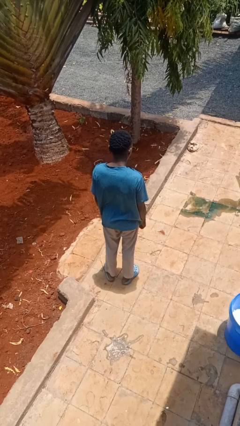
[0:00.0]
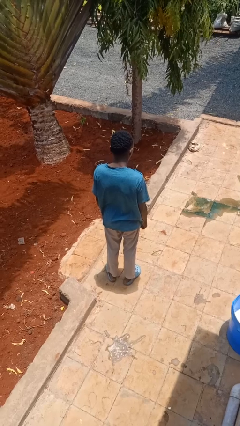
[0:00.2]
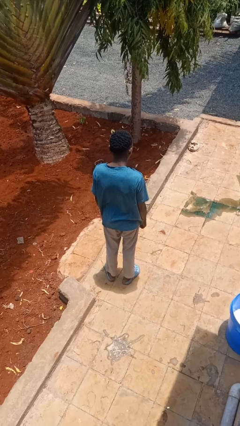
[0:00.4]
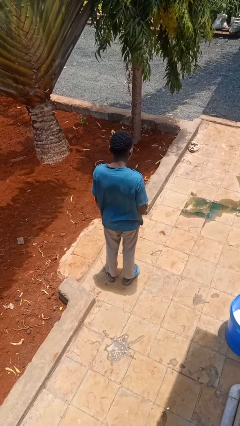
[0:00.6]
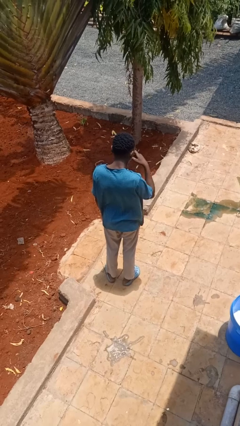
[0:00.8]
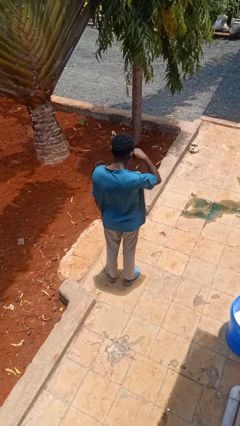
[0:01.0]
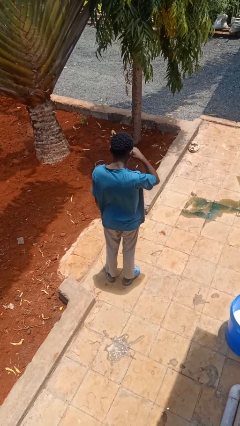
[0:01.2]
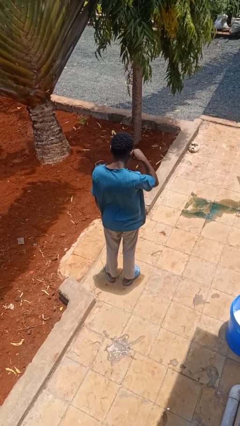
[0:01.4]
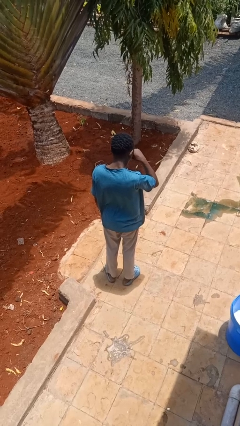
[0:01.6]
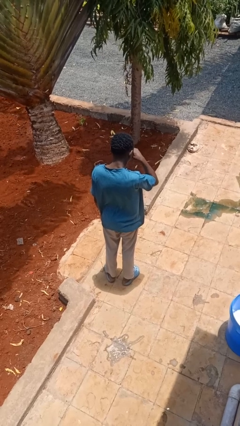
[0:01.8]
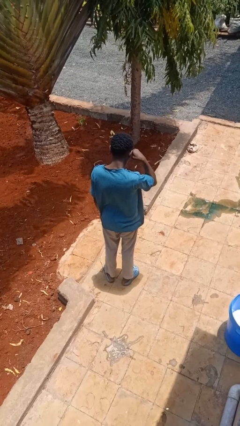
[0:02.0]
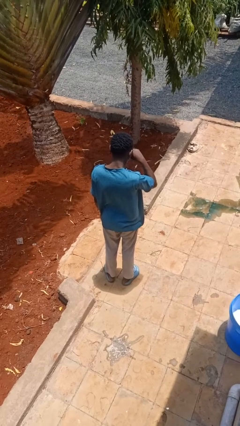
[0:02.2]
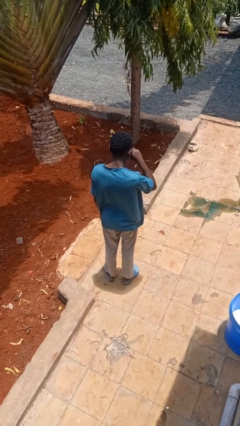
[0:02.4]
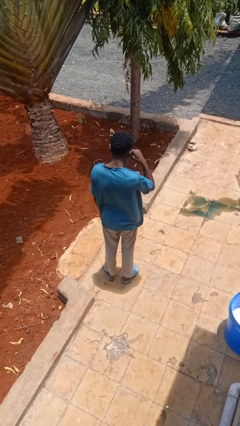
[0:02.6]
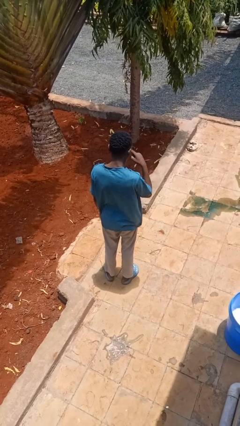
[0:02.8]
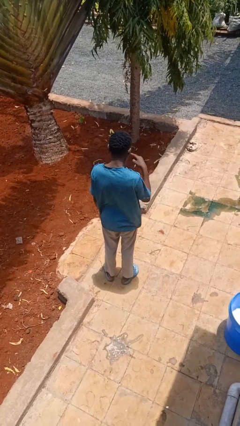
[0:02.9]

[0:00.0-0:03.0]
person rubs eyes

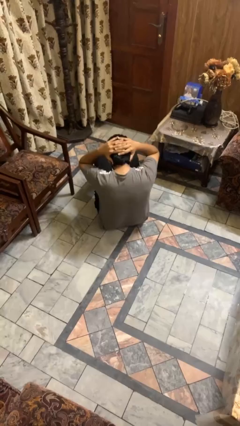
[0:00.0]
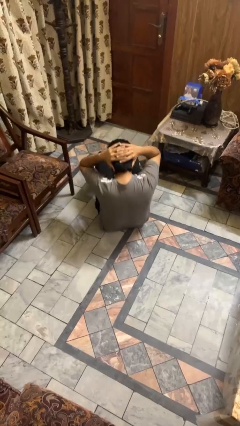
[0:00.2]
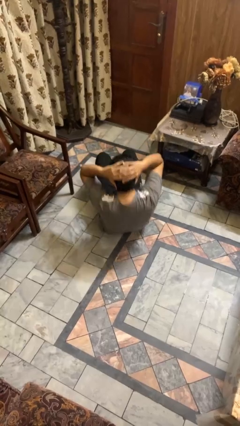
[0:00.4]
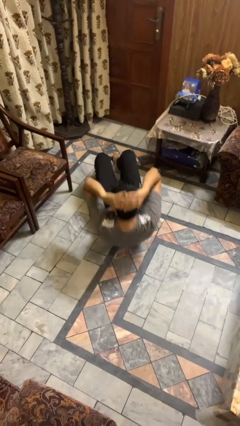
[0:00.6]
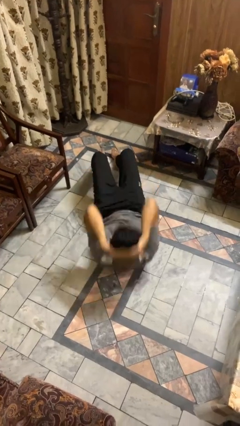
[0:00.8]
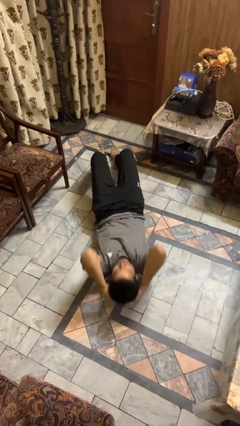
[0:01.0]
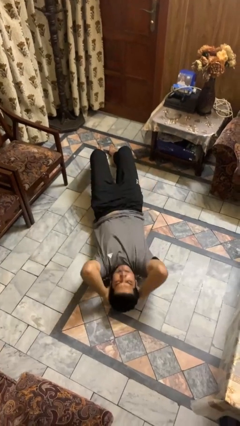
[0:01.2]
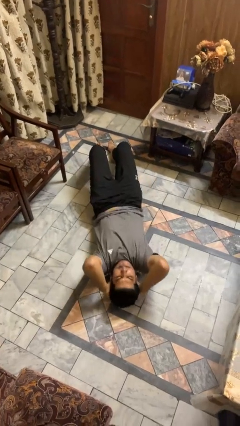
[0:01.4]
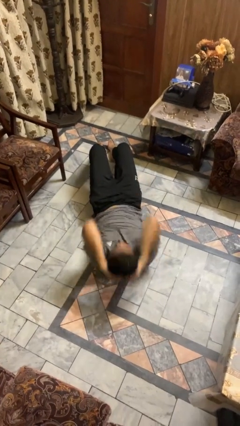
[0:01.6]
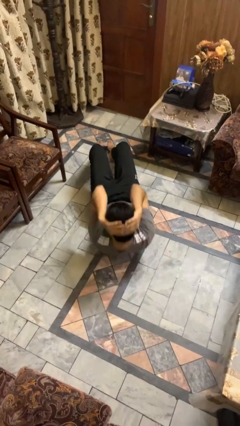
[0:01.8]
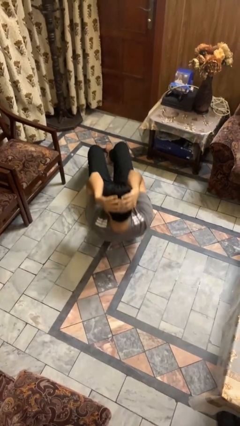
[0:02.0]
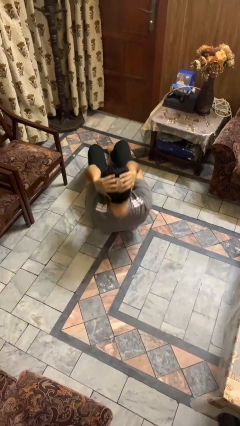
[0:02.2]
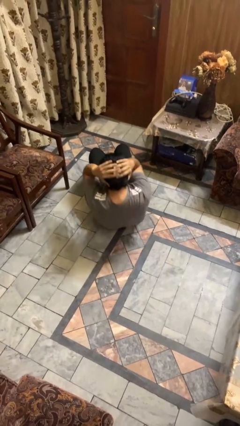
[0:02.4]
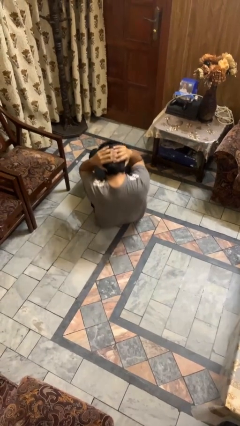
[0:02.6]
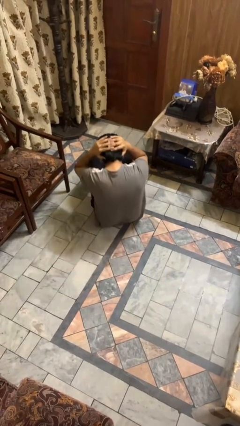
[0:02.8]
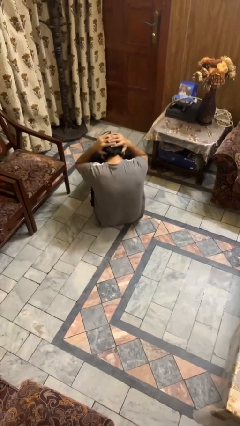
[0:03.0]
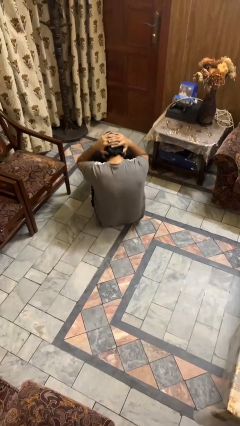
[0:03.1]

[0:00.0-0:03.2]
person exercises with situp

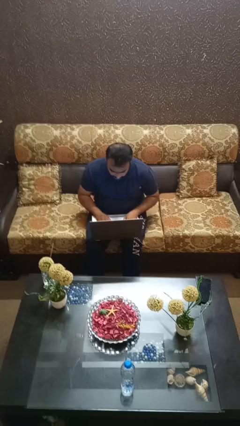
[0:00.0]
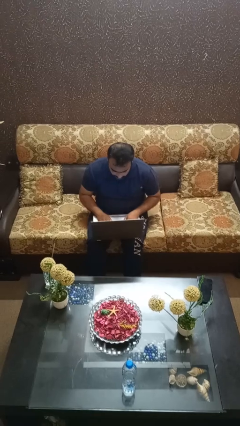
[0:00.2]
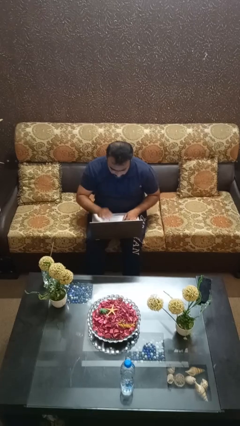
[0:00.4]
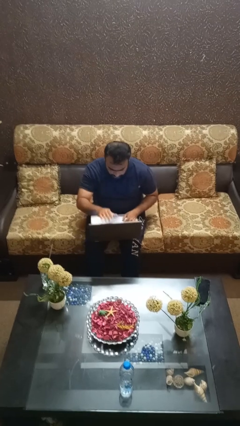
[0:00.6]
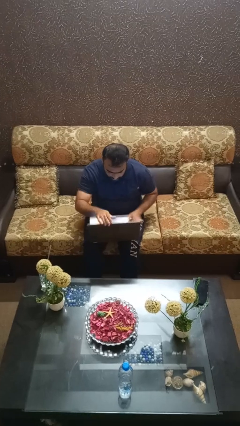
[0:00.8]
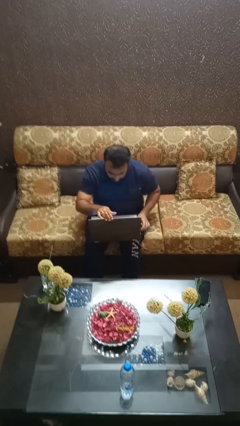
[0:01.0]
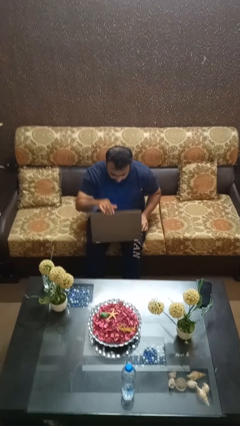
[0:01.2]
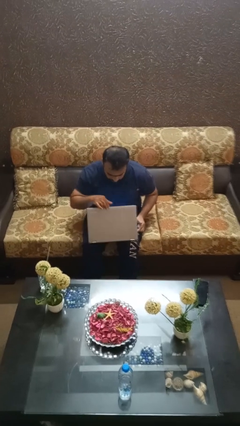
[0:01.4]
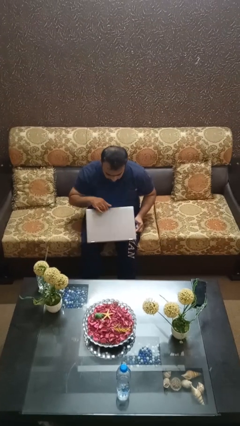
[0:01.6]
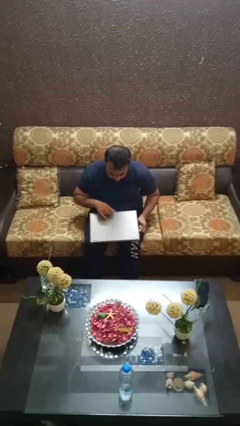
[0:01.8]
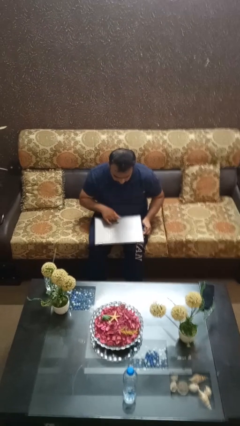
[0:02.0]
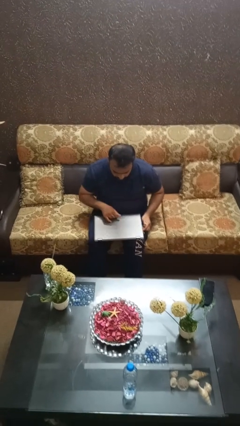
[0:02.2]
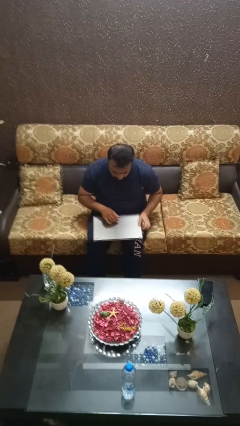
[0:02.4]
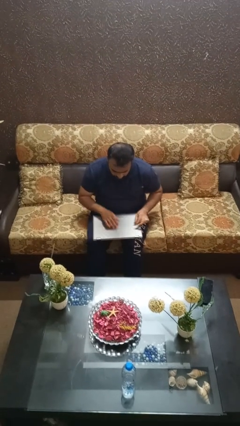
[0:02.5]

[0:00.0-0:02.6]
person closes laptop

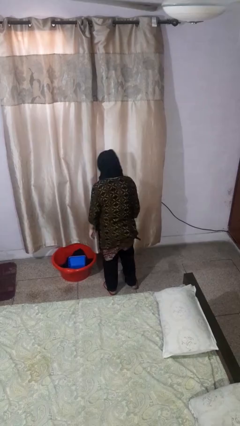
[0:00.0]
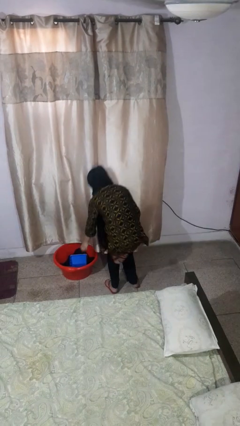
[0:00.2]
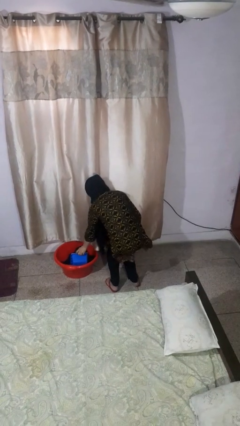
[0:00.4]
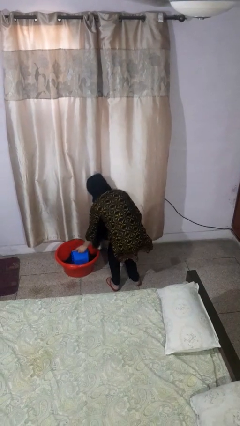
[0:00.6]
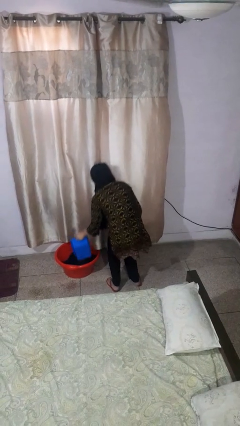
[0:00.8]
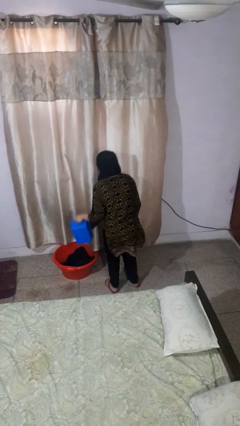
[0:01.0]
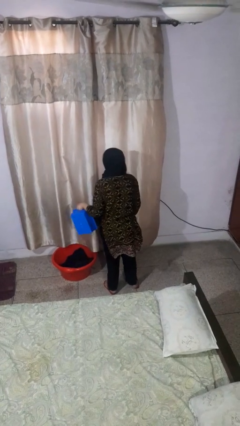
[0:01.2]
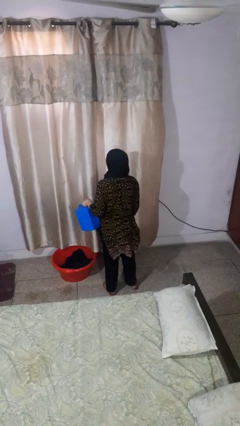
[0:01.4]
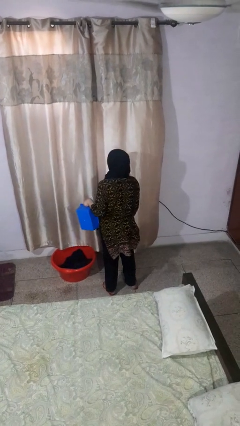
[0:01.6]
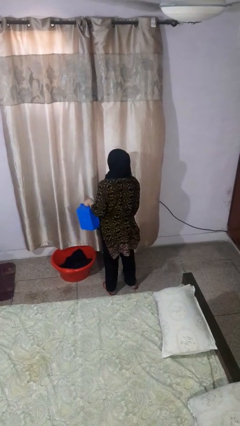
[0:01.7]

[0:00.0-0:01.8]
person takes object from basket

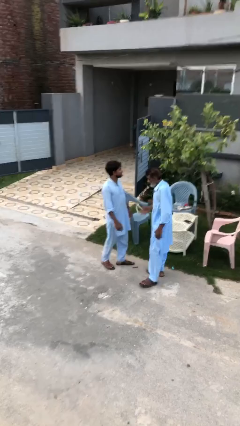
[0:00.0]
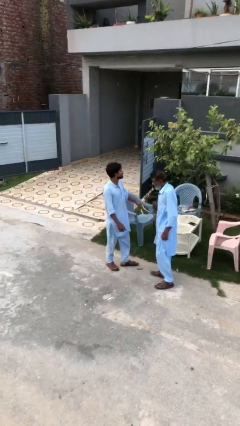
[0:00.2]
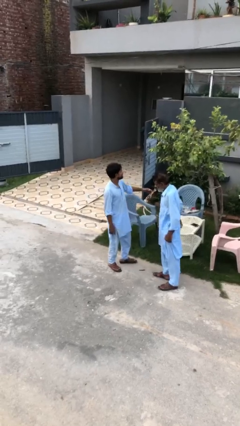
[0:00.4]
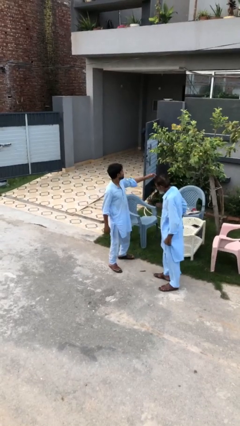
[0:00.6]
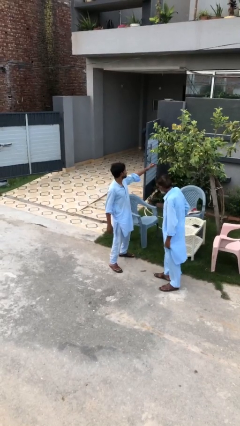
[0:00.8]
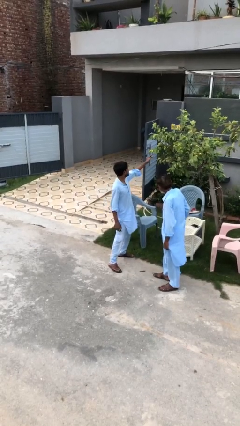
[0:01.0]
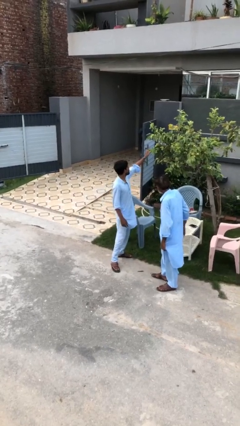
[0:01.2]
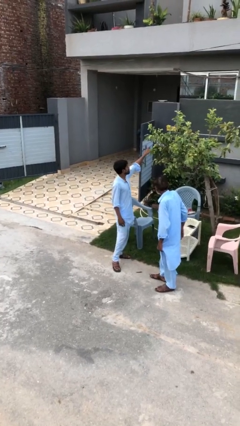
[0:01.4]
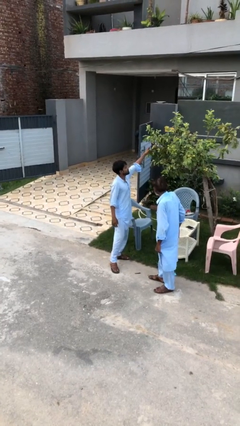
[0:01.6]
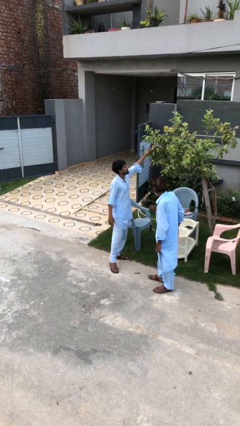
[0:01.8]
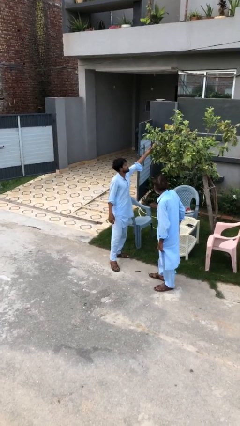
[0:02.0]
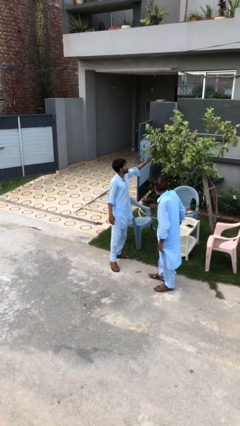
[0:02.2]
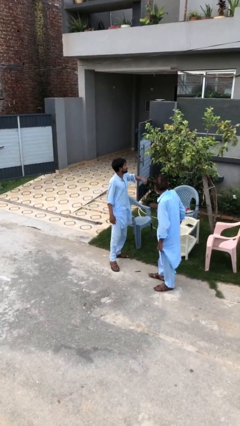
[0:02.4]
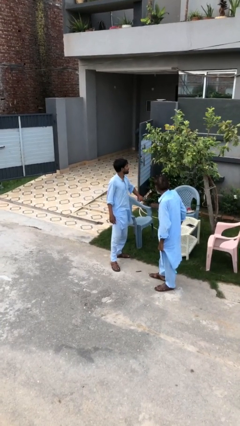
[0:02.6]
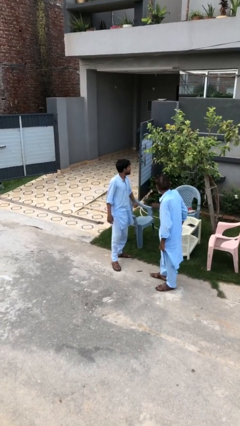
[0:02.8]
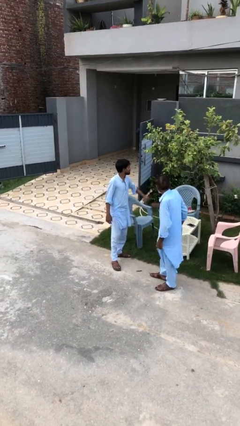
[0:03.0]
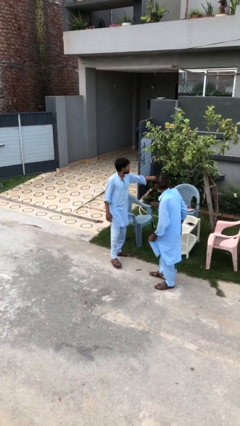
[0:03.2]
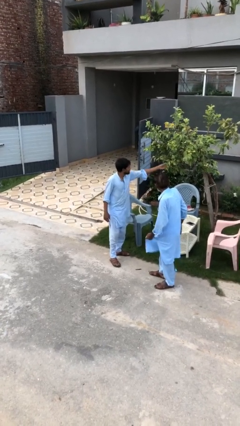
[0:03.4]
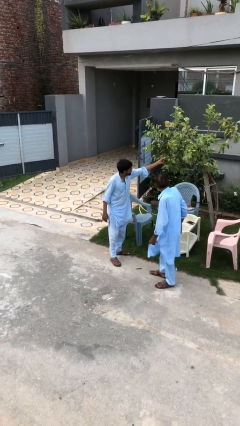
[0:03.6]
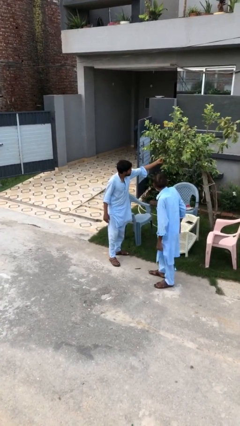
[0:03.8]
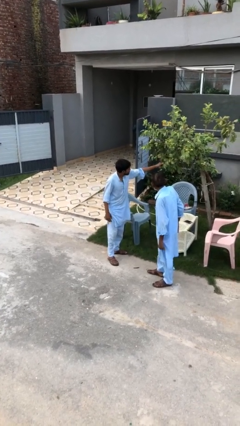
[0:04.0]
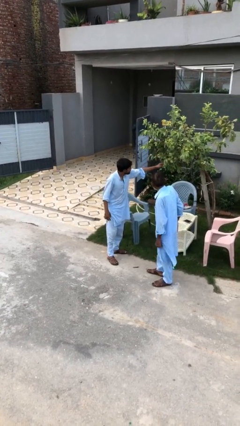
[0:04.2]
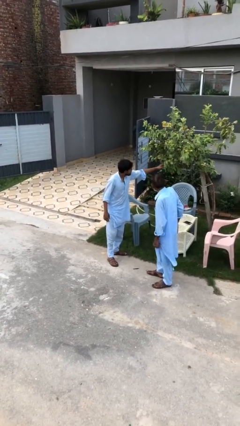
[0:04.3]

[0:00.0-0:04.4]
person talks to person

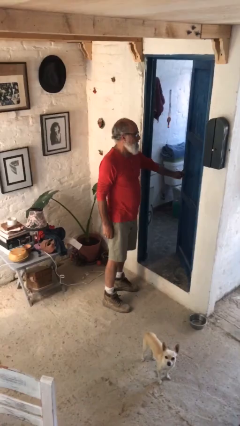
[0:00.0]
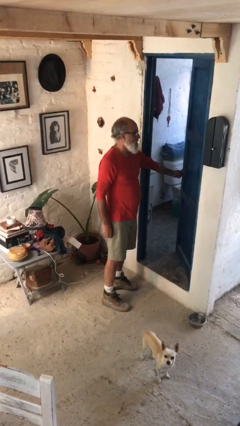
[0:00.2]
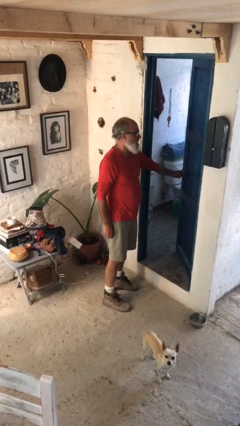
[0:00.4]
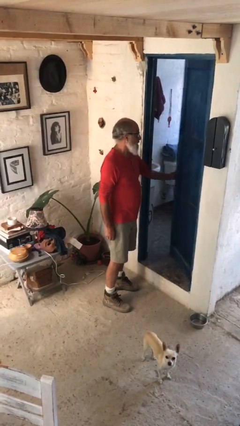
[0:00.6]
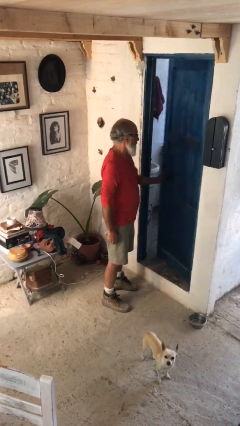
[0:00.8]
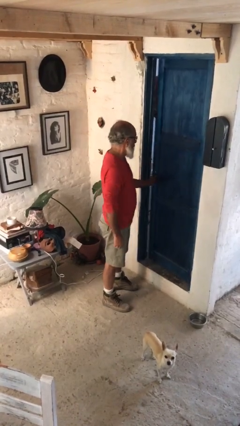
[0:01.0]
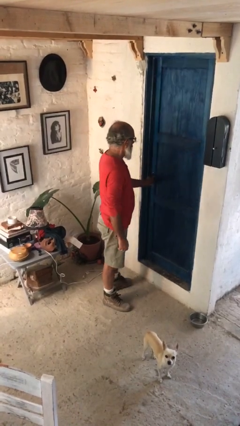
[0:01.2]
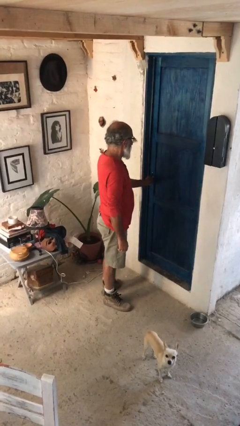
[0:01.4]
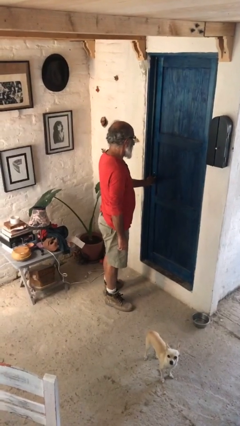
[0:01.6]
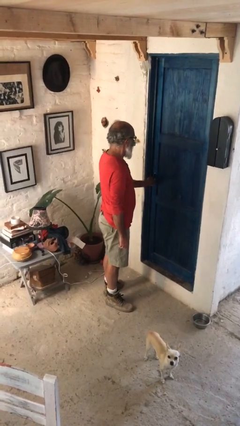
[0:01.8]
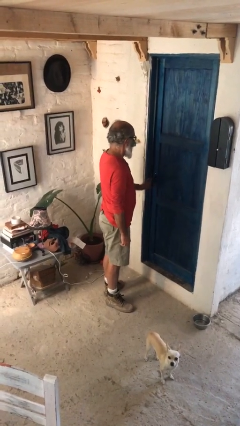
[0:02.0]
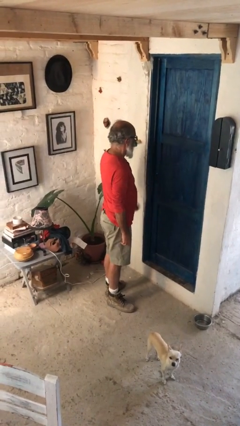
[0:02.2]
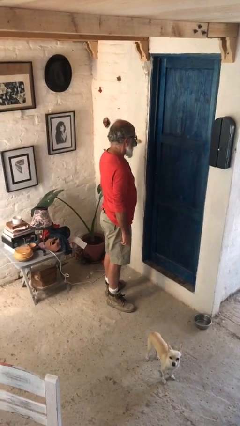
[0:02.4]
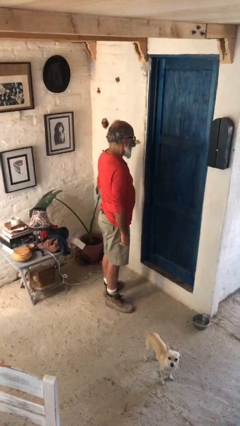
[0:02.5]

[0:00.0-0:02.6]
person closes facility door
